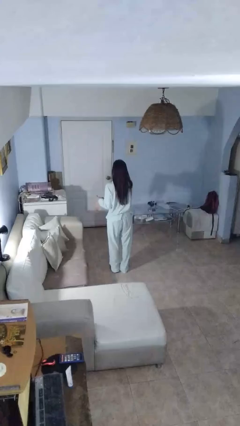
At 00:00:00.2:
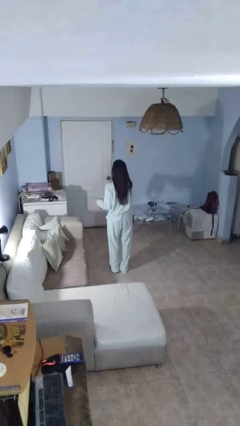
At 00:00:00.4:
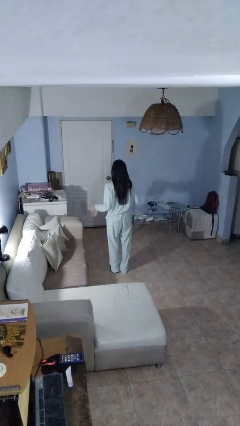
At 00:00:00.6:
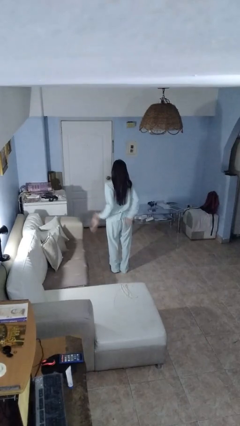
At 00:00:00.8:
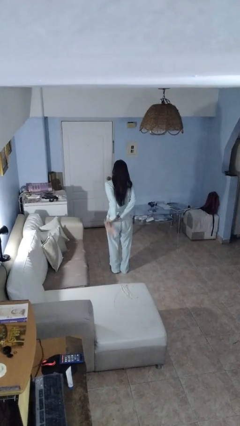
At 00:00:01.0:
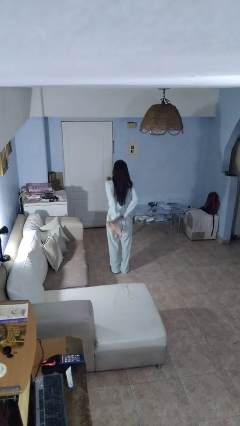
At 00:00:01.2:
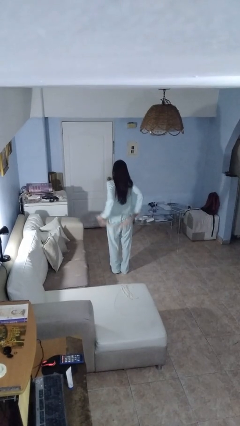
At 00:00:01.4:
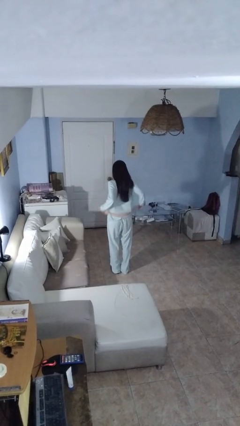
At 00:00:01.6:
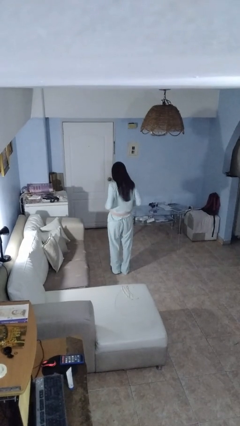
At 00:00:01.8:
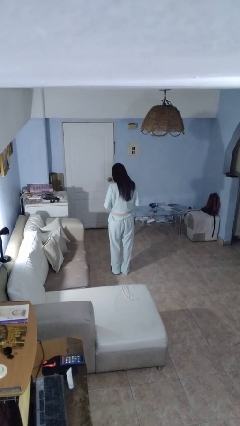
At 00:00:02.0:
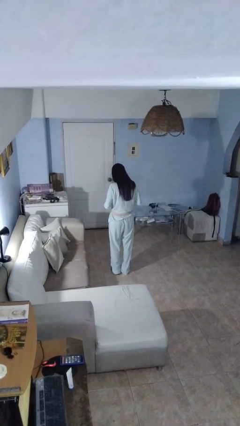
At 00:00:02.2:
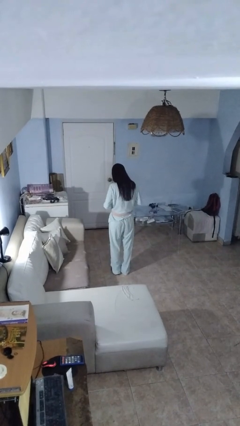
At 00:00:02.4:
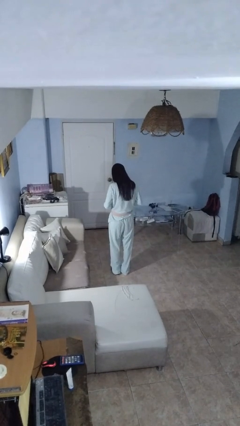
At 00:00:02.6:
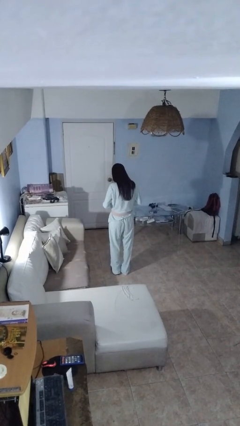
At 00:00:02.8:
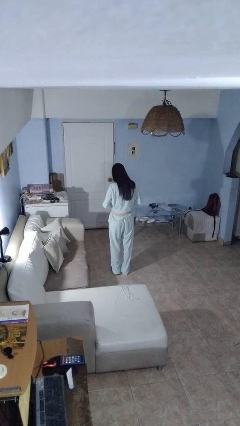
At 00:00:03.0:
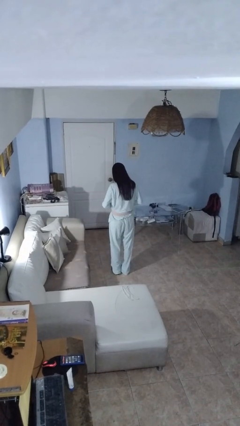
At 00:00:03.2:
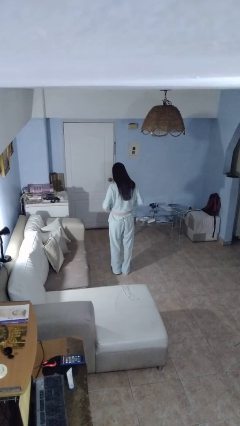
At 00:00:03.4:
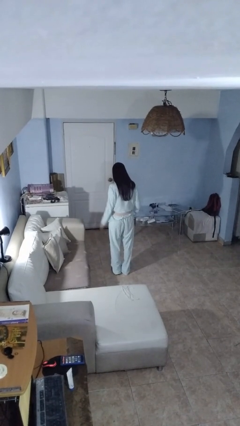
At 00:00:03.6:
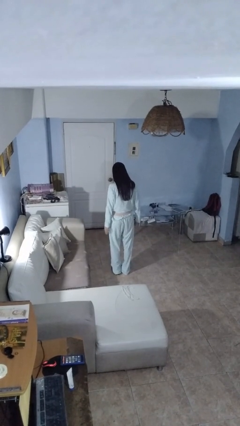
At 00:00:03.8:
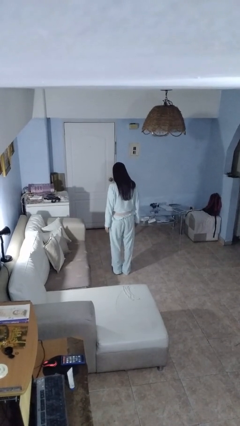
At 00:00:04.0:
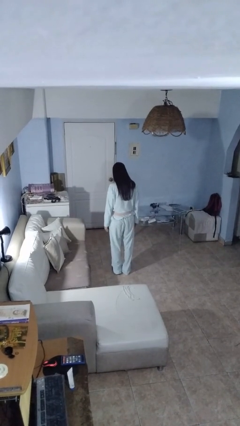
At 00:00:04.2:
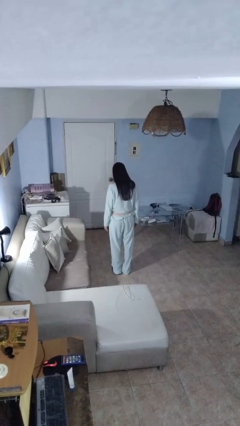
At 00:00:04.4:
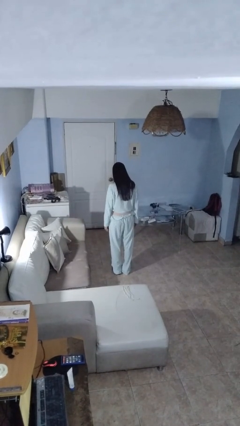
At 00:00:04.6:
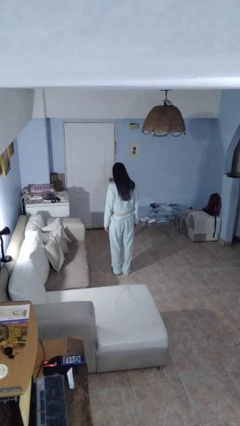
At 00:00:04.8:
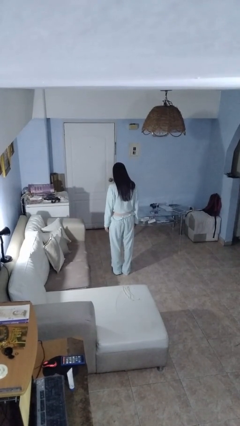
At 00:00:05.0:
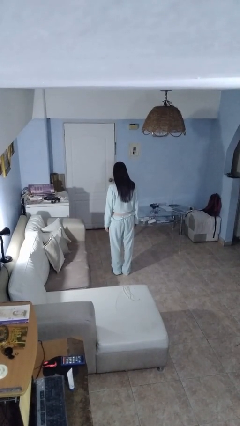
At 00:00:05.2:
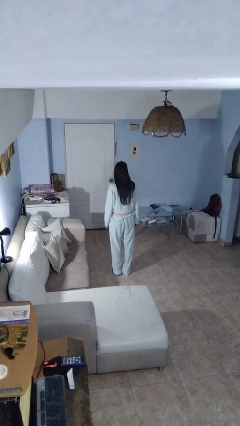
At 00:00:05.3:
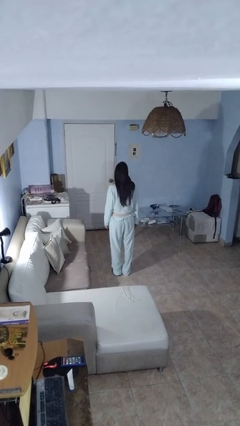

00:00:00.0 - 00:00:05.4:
person puts on belt

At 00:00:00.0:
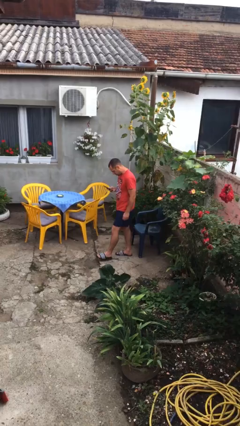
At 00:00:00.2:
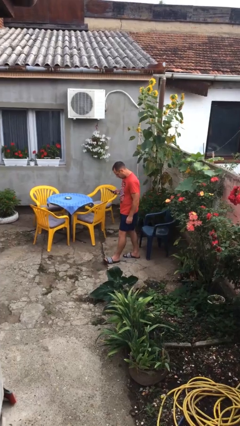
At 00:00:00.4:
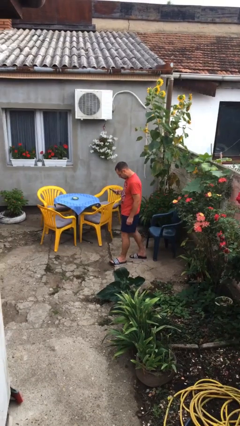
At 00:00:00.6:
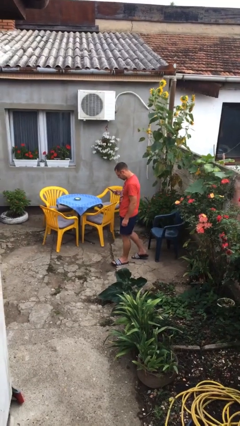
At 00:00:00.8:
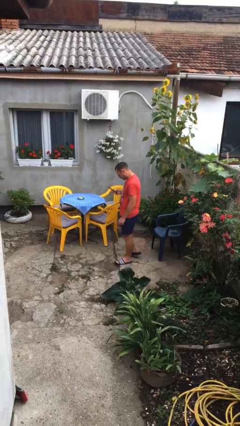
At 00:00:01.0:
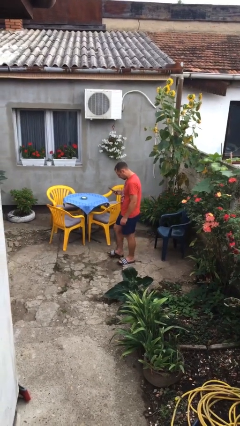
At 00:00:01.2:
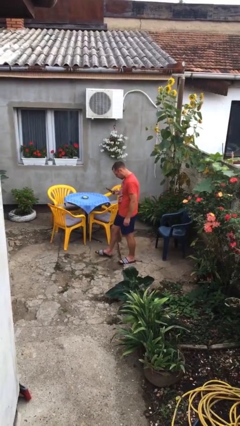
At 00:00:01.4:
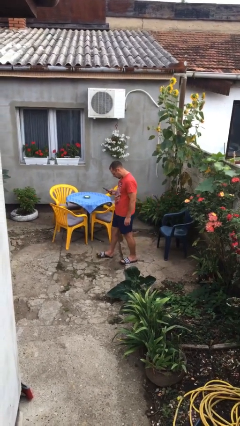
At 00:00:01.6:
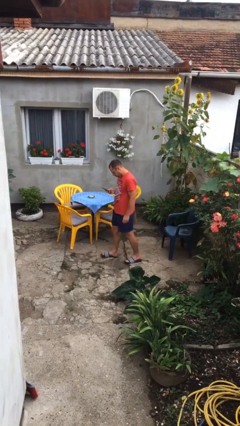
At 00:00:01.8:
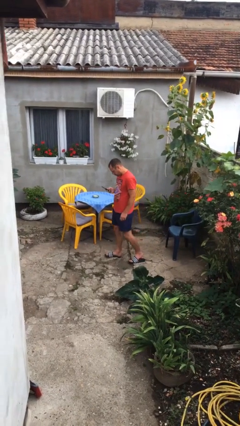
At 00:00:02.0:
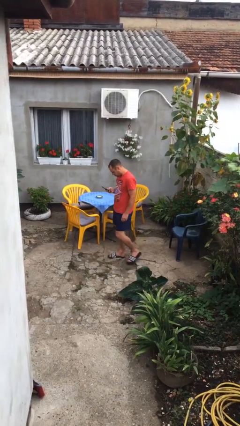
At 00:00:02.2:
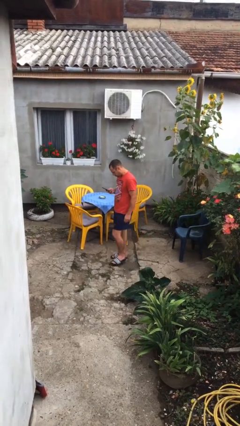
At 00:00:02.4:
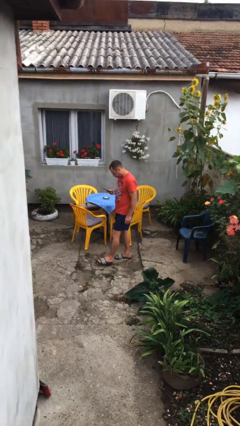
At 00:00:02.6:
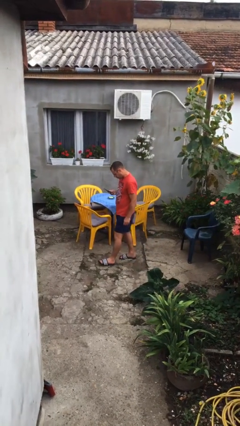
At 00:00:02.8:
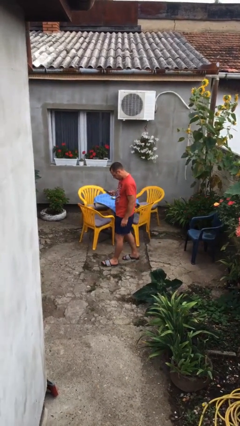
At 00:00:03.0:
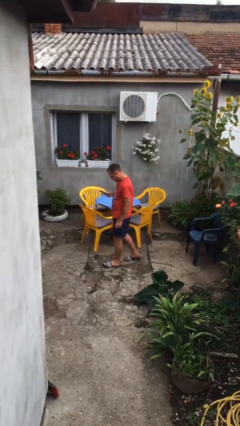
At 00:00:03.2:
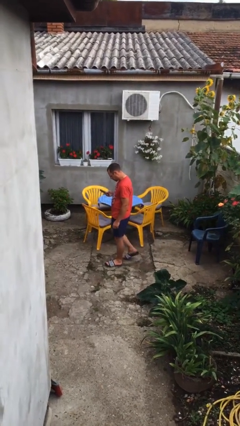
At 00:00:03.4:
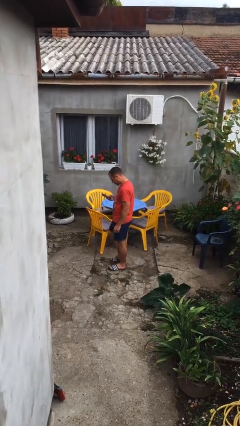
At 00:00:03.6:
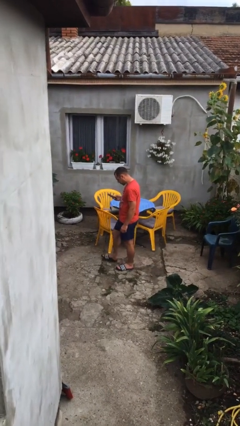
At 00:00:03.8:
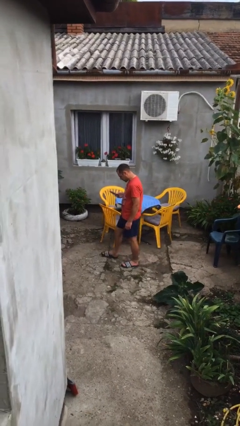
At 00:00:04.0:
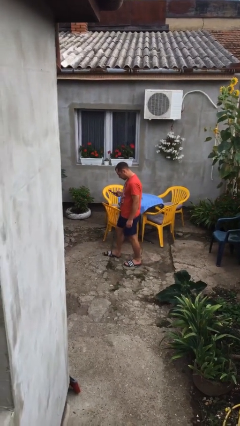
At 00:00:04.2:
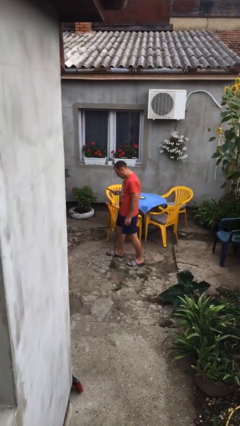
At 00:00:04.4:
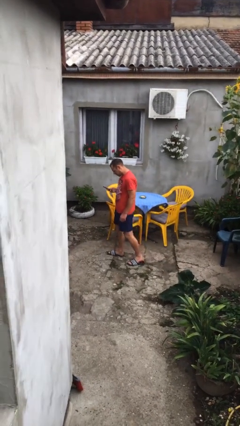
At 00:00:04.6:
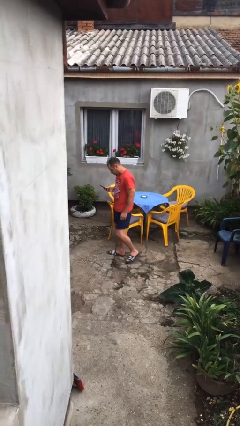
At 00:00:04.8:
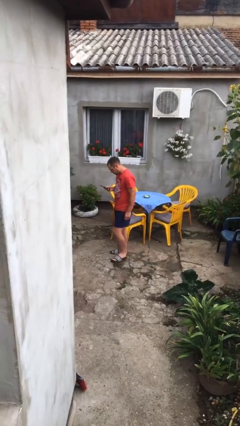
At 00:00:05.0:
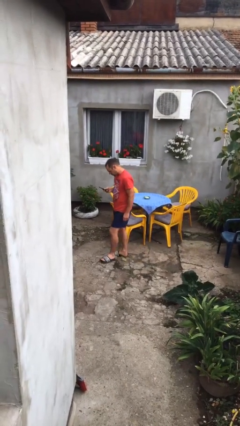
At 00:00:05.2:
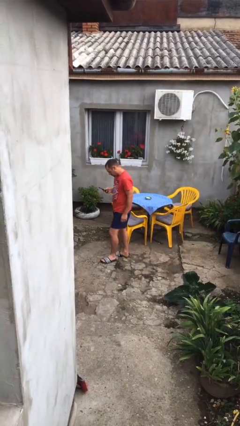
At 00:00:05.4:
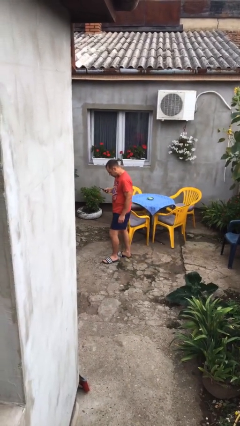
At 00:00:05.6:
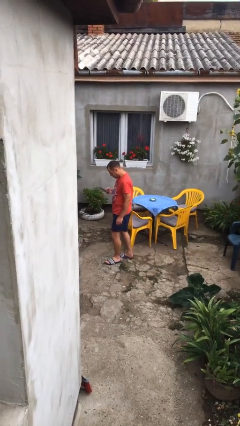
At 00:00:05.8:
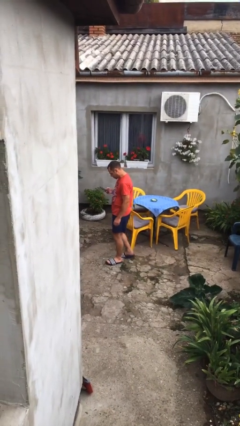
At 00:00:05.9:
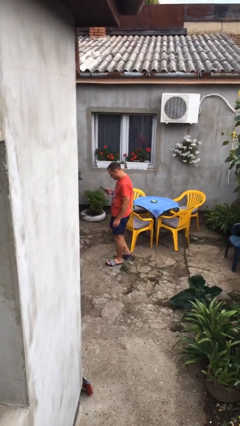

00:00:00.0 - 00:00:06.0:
person texts on phone

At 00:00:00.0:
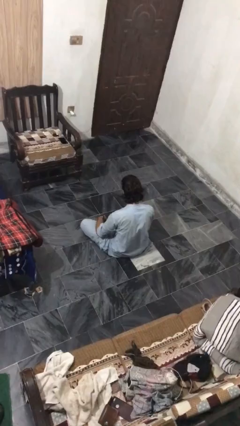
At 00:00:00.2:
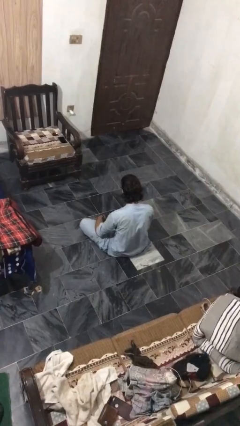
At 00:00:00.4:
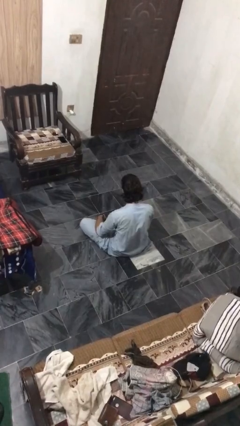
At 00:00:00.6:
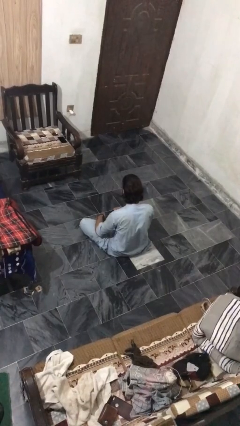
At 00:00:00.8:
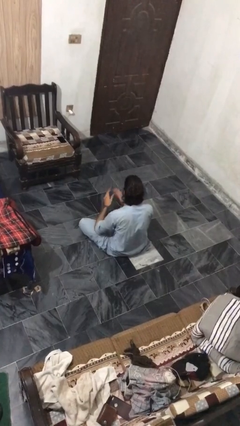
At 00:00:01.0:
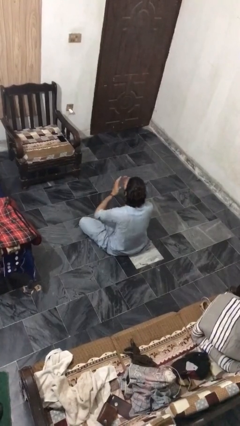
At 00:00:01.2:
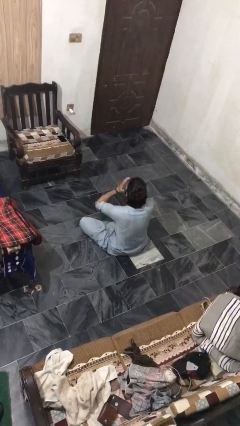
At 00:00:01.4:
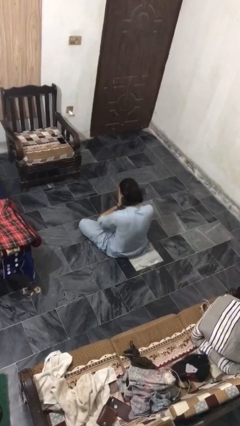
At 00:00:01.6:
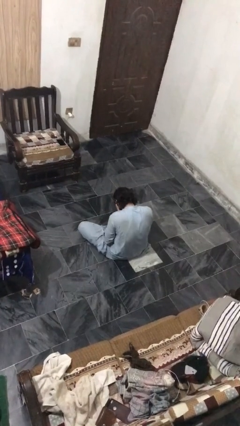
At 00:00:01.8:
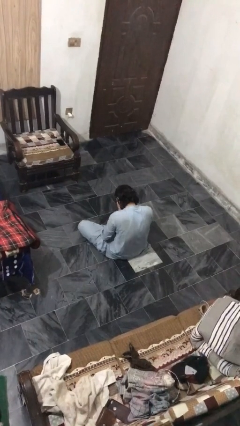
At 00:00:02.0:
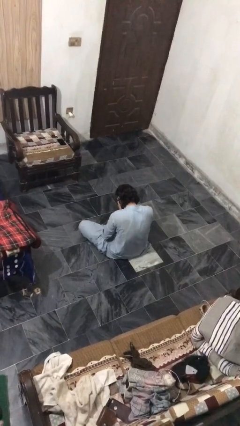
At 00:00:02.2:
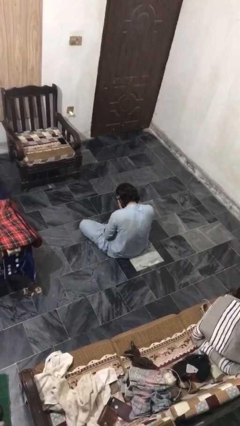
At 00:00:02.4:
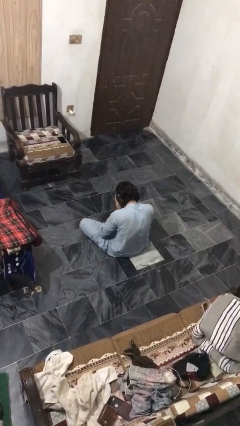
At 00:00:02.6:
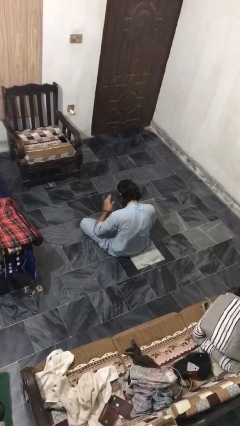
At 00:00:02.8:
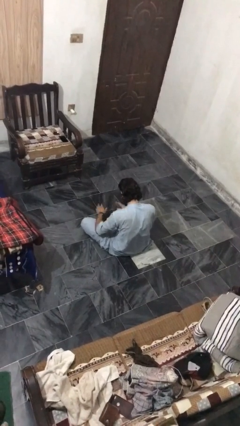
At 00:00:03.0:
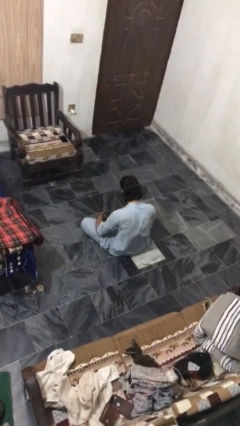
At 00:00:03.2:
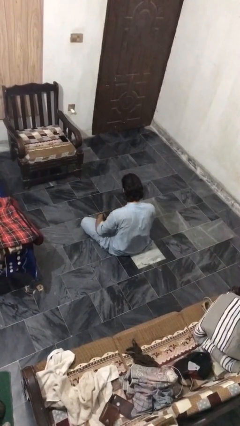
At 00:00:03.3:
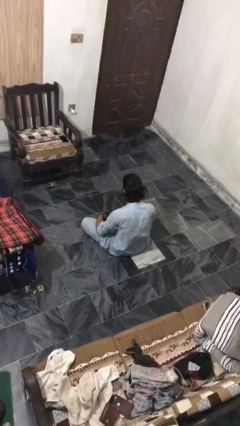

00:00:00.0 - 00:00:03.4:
person sneezes into hand

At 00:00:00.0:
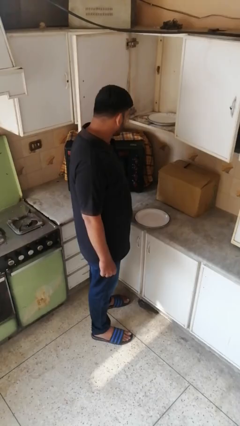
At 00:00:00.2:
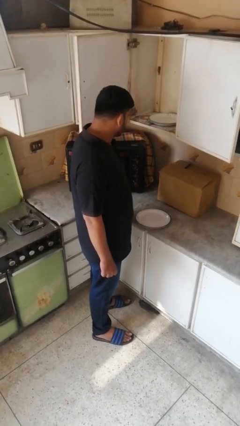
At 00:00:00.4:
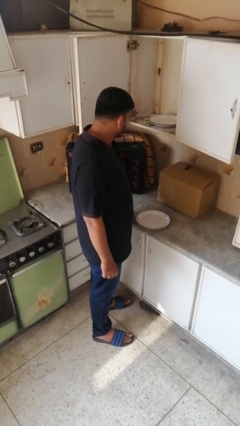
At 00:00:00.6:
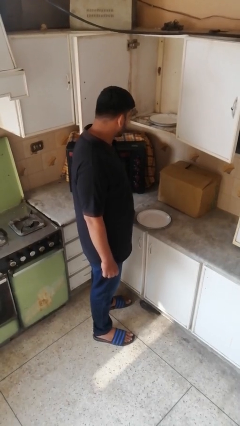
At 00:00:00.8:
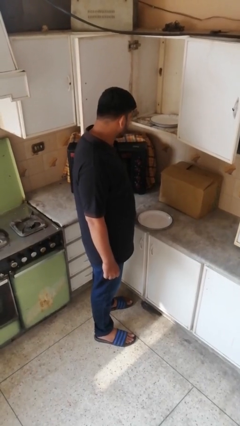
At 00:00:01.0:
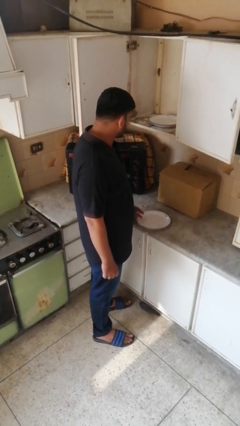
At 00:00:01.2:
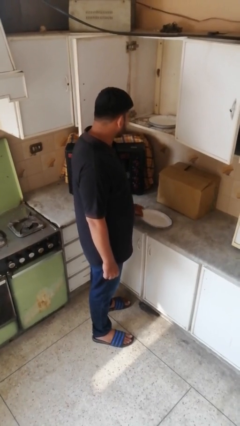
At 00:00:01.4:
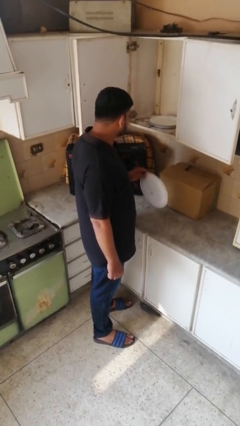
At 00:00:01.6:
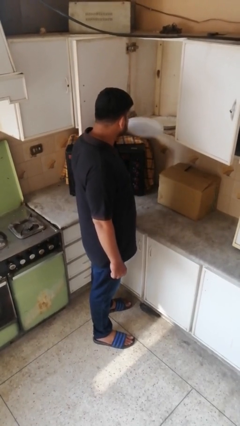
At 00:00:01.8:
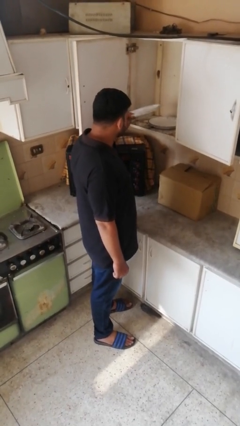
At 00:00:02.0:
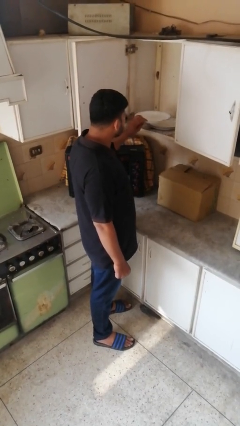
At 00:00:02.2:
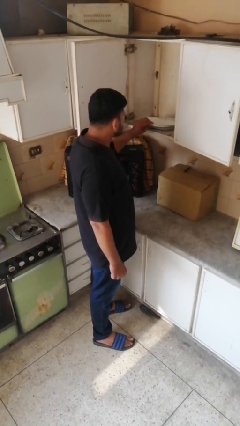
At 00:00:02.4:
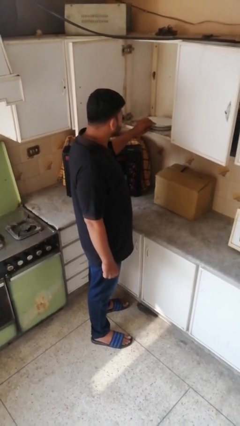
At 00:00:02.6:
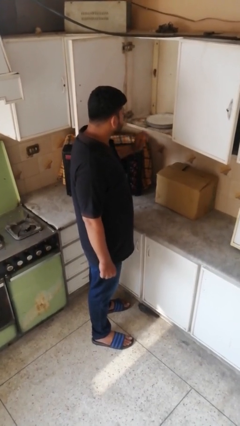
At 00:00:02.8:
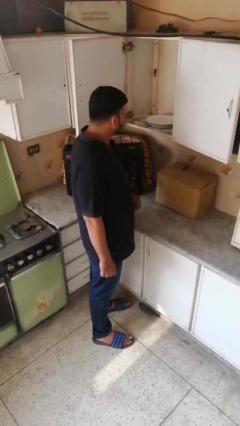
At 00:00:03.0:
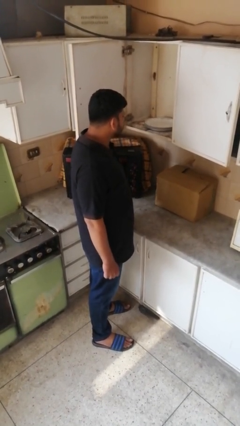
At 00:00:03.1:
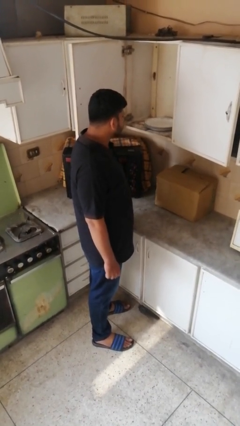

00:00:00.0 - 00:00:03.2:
person puts object in cabinet
